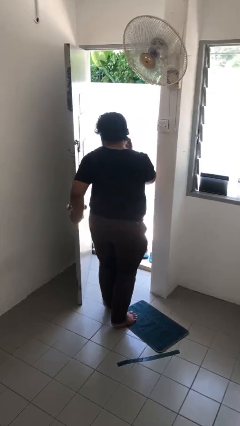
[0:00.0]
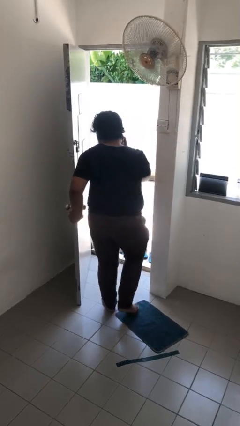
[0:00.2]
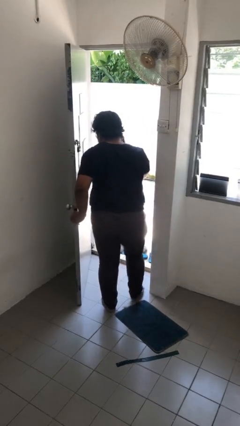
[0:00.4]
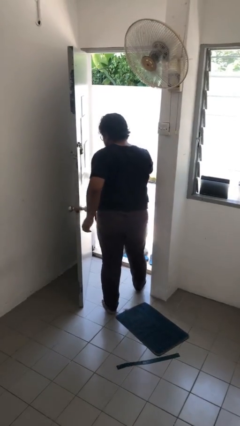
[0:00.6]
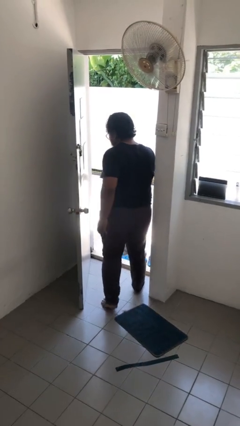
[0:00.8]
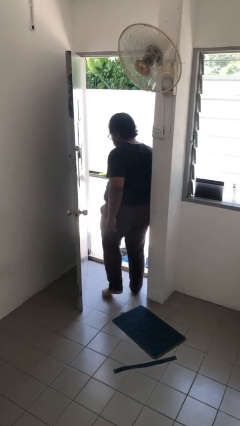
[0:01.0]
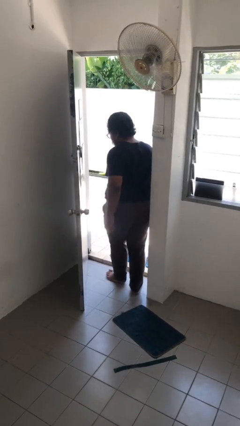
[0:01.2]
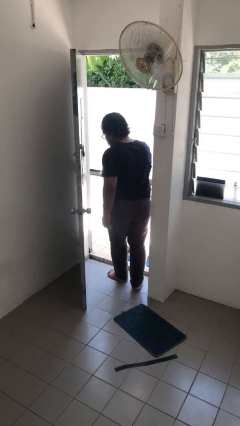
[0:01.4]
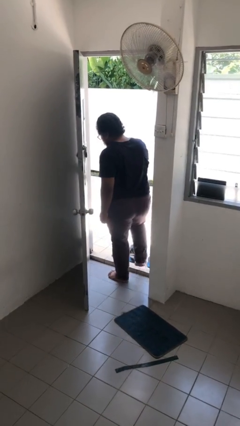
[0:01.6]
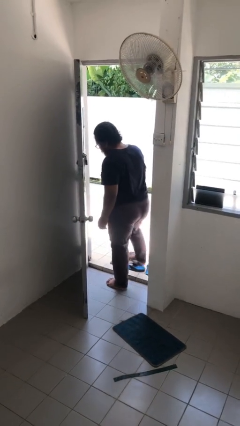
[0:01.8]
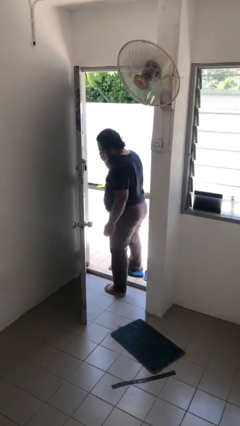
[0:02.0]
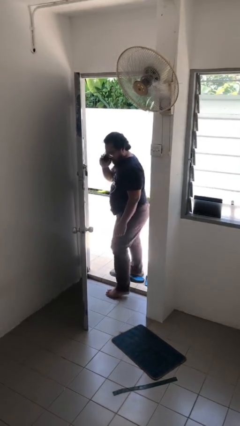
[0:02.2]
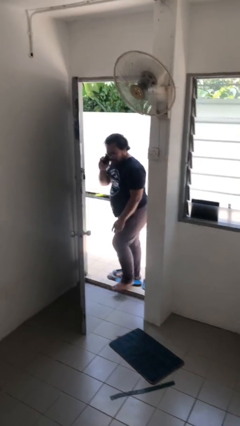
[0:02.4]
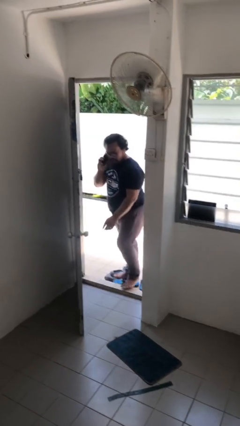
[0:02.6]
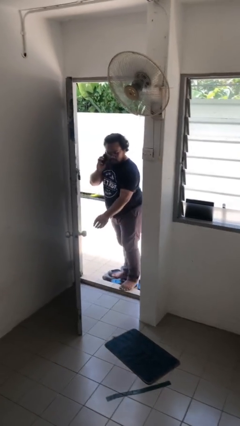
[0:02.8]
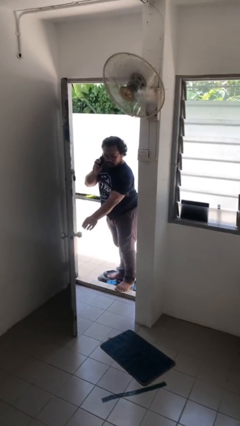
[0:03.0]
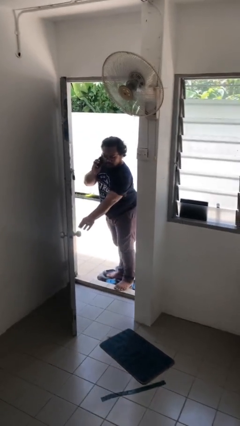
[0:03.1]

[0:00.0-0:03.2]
person exits scene through structure

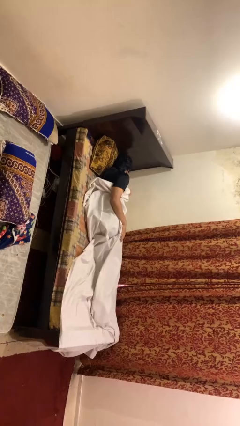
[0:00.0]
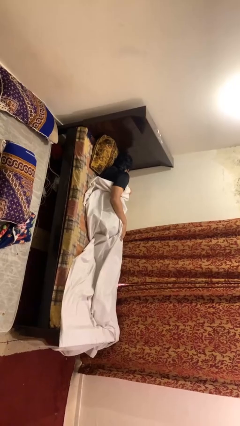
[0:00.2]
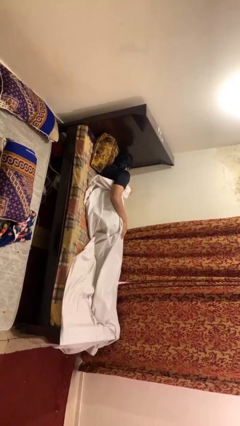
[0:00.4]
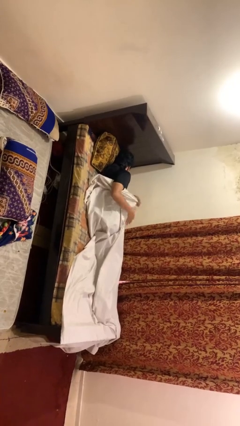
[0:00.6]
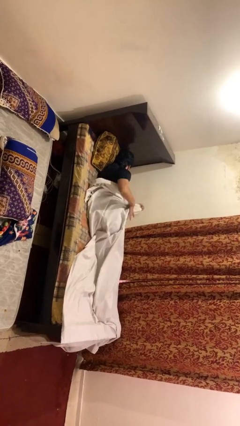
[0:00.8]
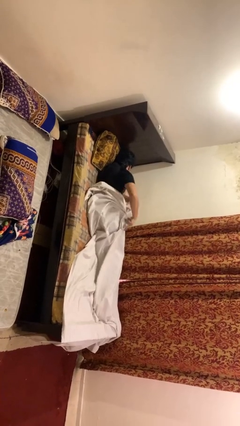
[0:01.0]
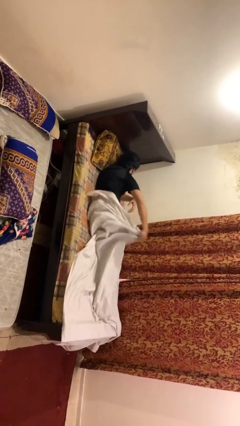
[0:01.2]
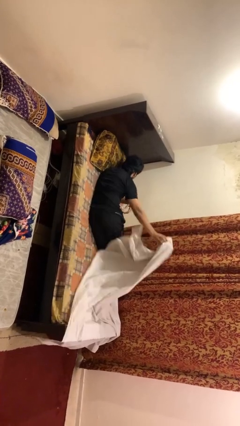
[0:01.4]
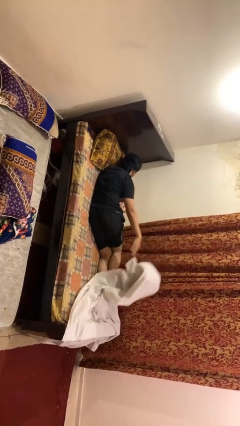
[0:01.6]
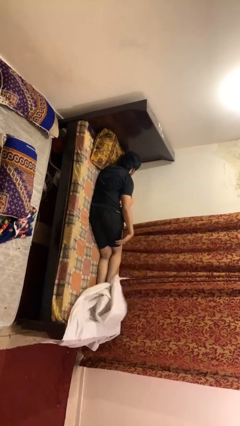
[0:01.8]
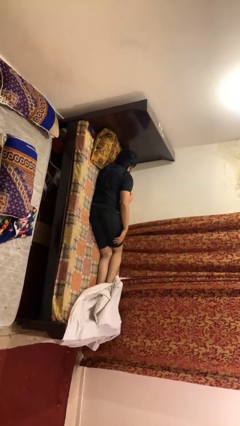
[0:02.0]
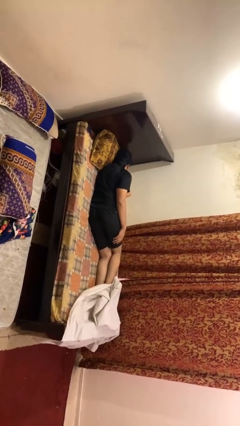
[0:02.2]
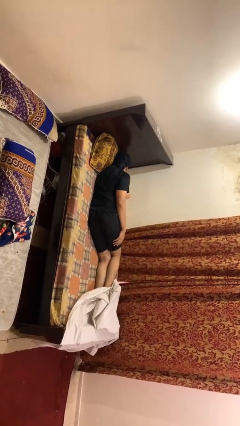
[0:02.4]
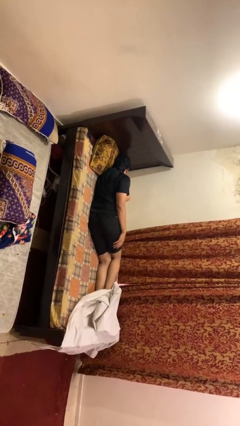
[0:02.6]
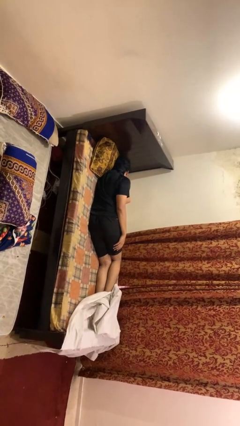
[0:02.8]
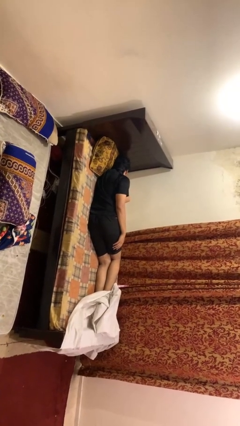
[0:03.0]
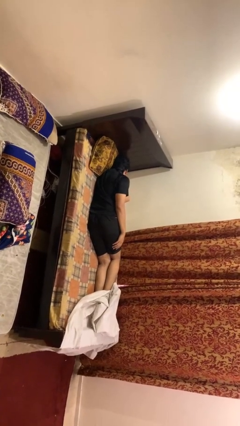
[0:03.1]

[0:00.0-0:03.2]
person uncovers with bedsheets

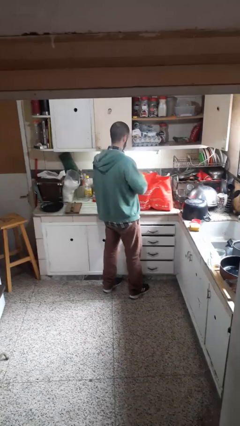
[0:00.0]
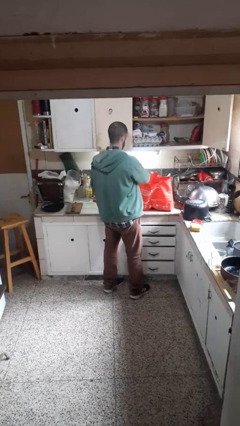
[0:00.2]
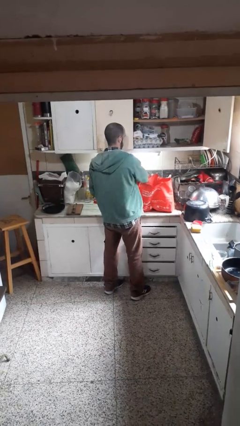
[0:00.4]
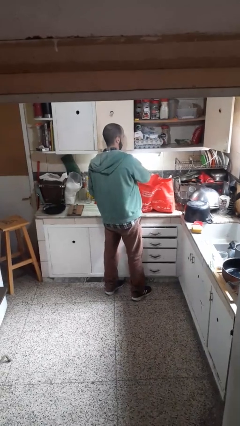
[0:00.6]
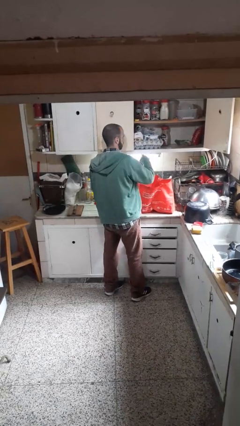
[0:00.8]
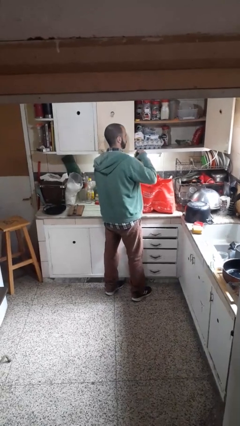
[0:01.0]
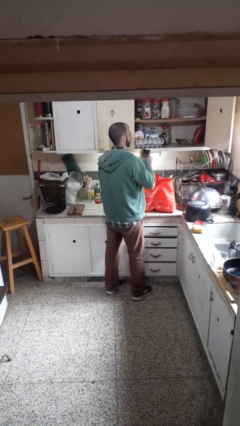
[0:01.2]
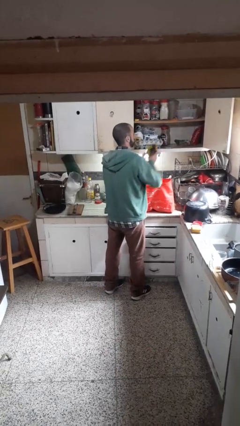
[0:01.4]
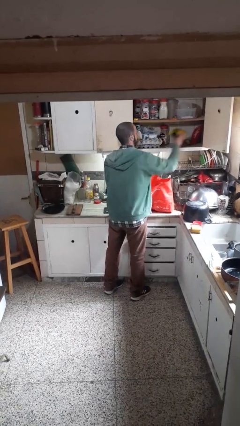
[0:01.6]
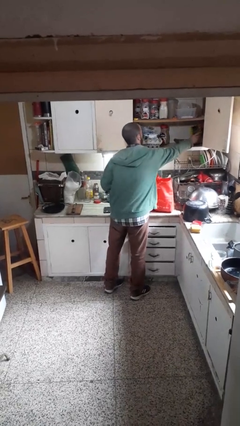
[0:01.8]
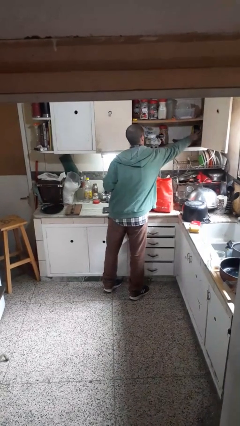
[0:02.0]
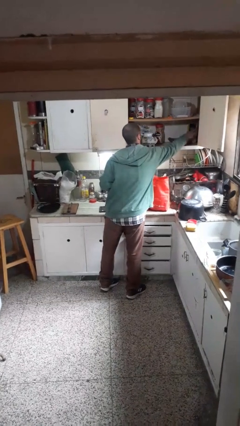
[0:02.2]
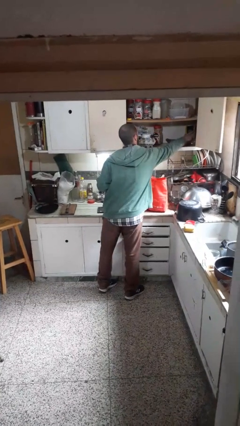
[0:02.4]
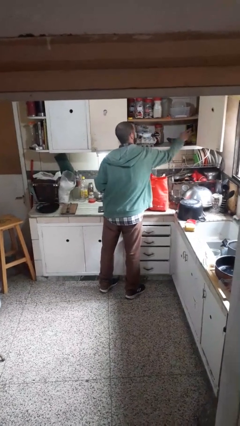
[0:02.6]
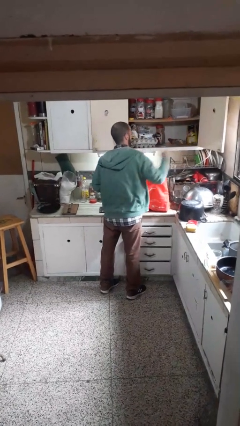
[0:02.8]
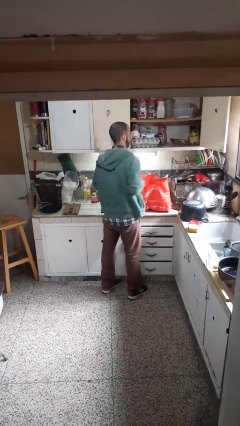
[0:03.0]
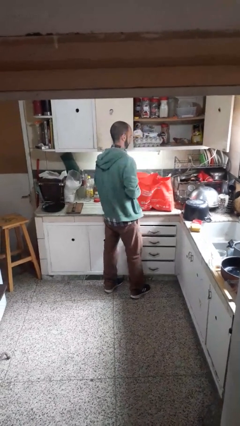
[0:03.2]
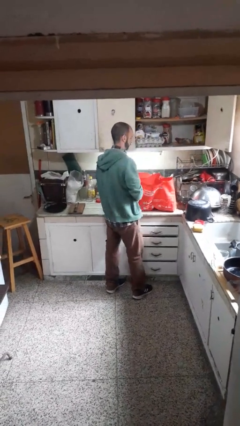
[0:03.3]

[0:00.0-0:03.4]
person loads groceries into cabinet

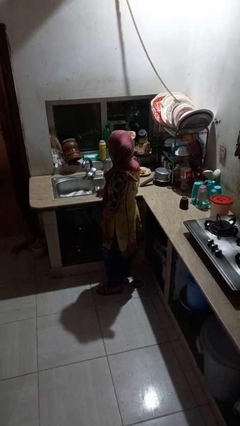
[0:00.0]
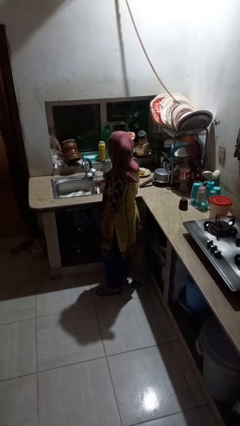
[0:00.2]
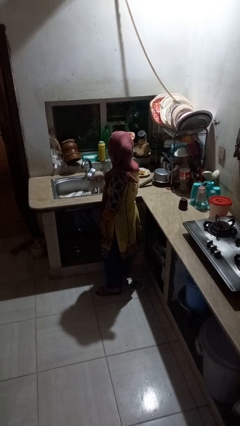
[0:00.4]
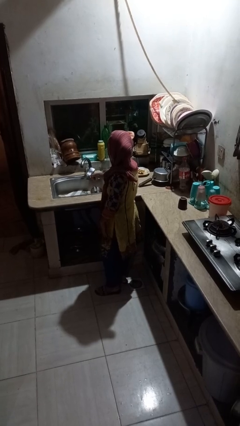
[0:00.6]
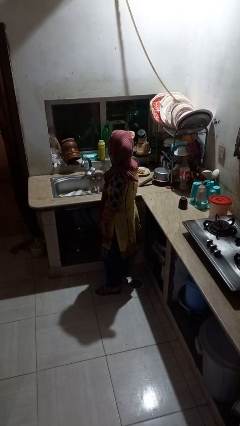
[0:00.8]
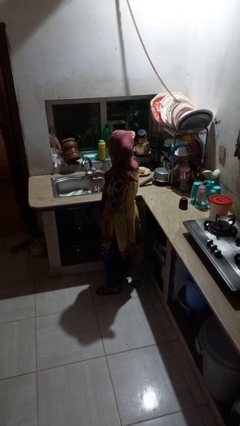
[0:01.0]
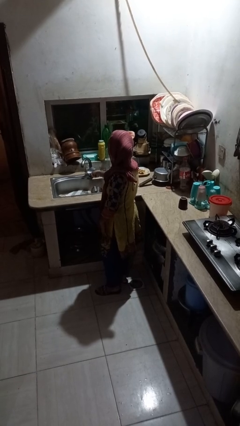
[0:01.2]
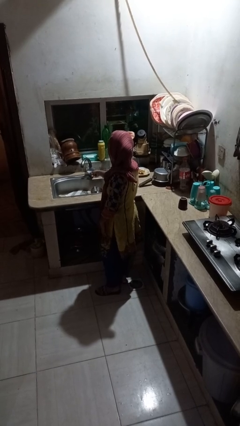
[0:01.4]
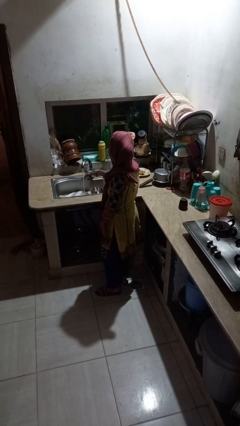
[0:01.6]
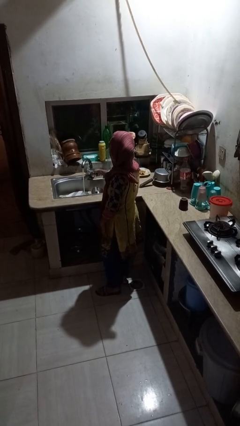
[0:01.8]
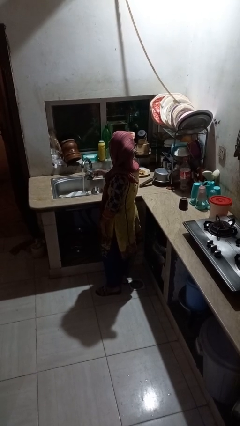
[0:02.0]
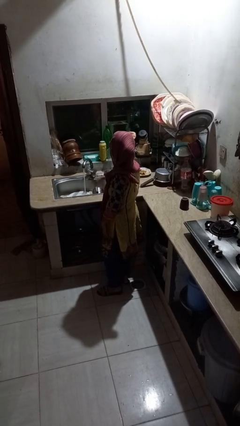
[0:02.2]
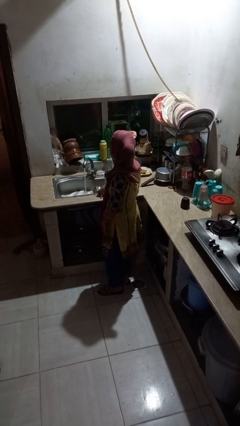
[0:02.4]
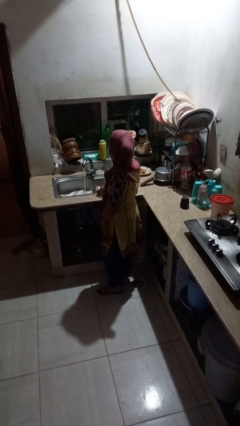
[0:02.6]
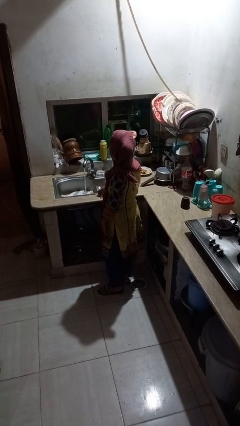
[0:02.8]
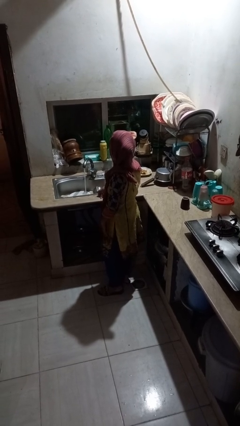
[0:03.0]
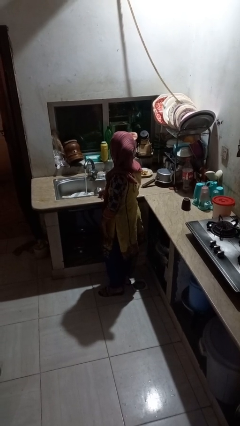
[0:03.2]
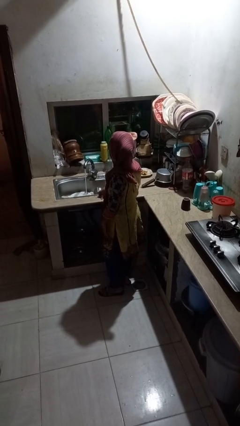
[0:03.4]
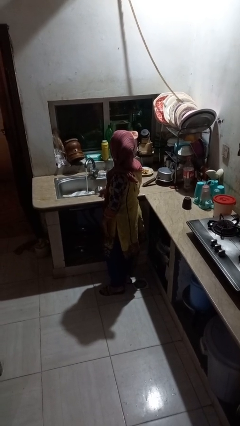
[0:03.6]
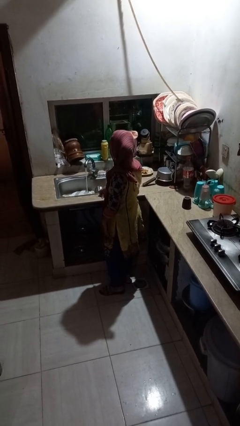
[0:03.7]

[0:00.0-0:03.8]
person turns on faucet

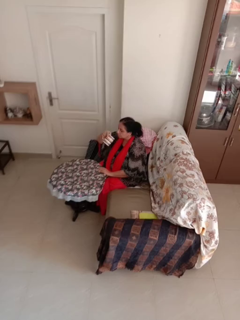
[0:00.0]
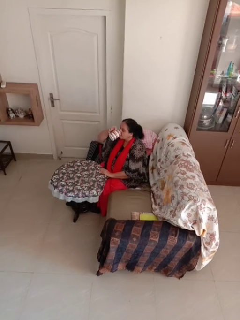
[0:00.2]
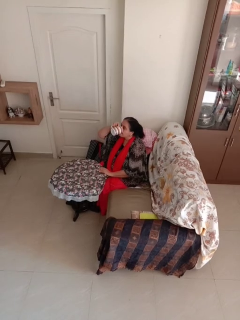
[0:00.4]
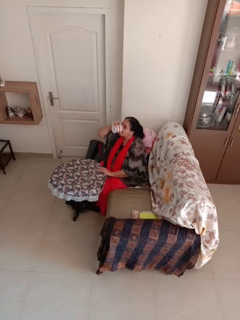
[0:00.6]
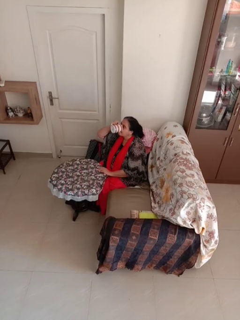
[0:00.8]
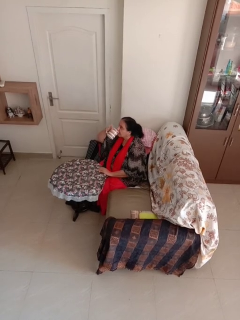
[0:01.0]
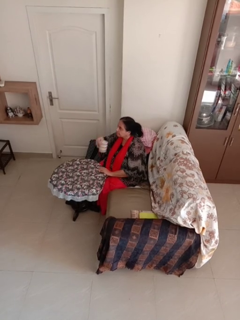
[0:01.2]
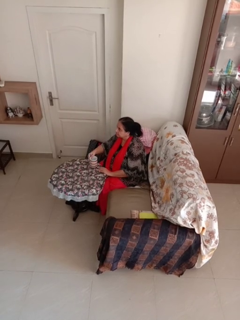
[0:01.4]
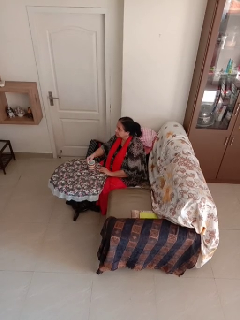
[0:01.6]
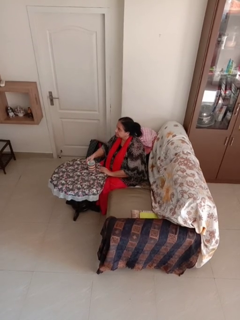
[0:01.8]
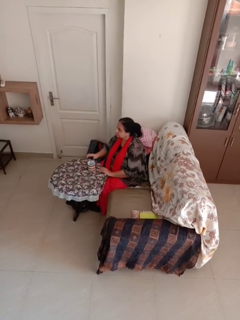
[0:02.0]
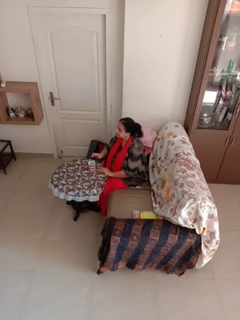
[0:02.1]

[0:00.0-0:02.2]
person drinks from mug

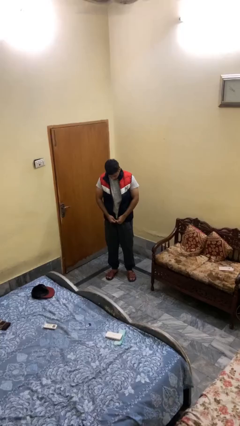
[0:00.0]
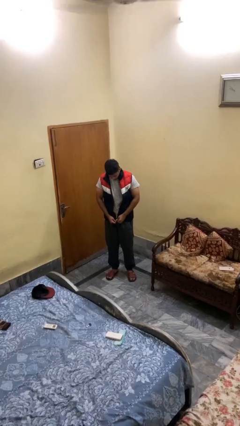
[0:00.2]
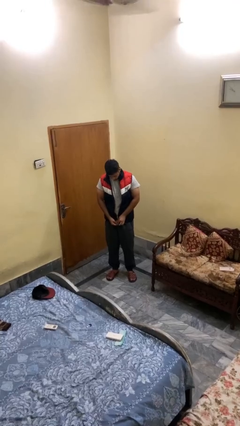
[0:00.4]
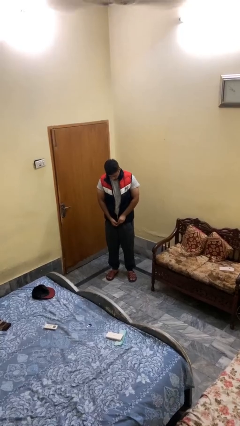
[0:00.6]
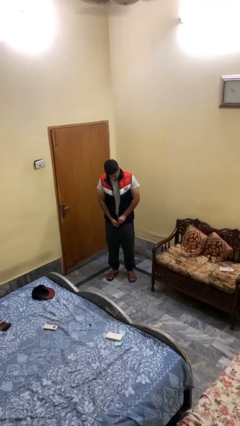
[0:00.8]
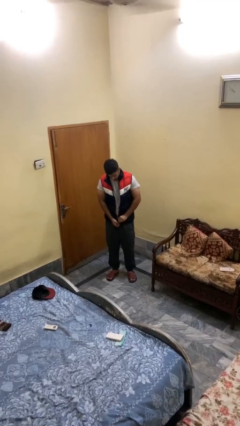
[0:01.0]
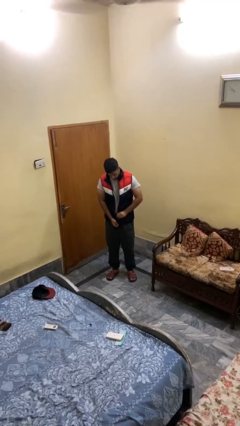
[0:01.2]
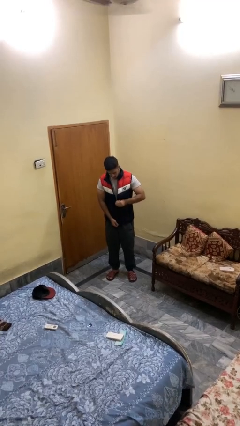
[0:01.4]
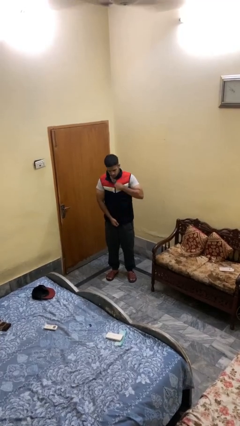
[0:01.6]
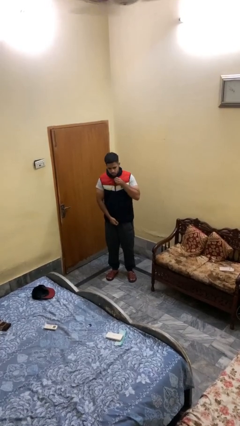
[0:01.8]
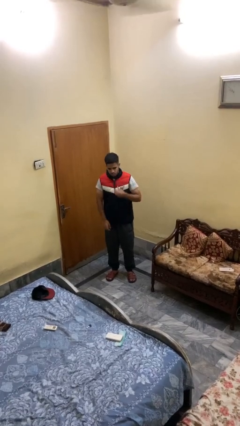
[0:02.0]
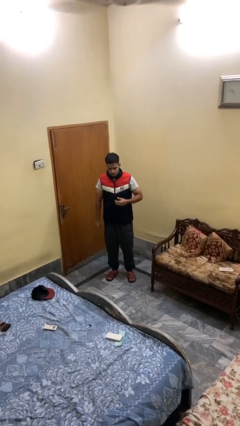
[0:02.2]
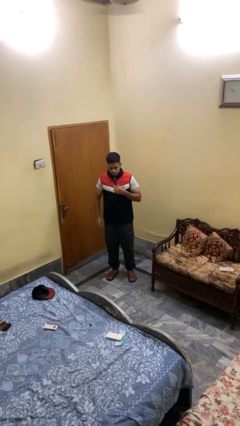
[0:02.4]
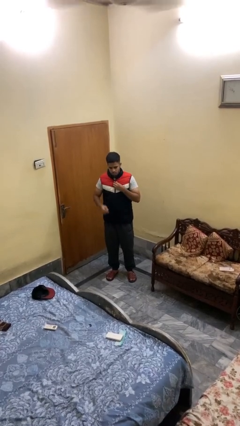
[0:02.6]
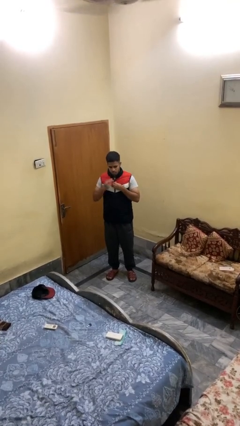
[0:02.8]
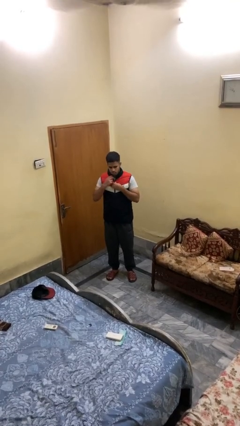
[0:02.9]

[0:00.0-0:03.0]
person zips up jacket
